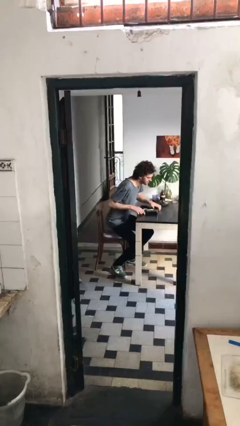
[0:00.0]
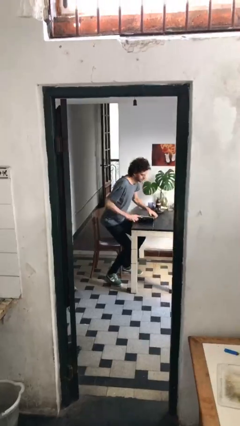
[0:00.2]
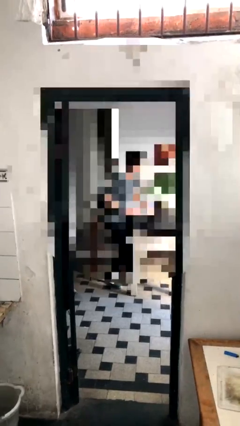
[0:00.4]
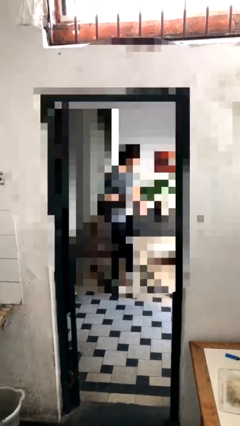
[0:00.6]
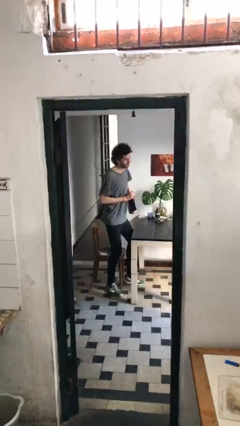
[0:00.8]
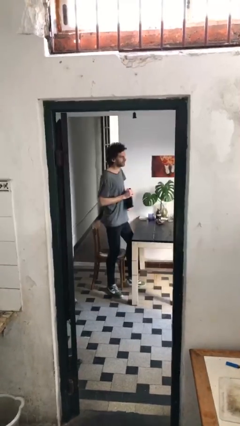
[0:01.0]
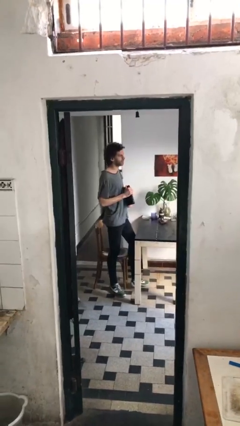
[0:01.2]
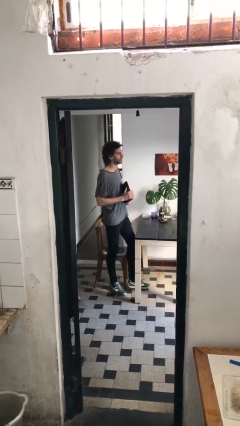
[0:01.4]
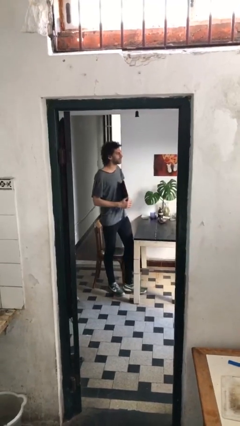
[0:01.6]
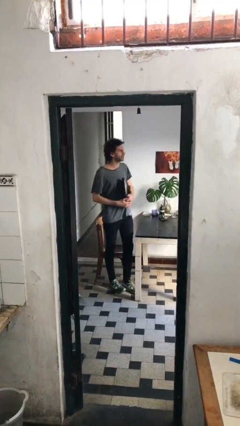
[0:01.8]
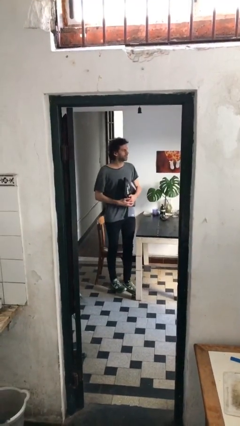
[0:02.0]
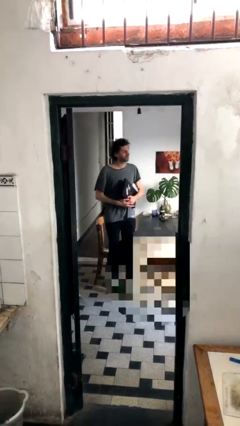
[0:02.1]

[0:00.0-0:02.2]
person stands up

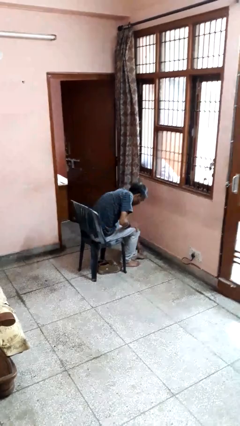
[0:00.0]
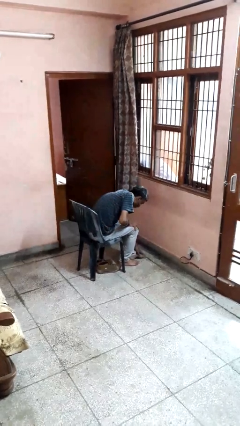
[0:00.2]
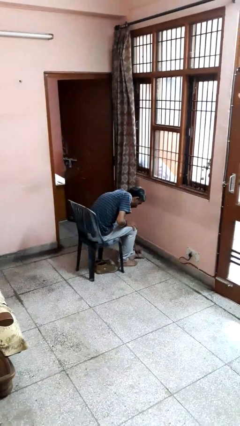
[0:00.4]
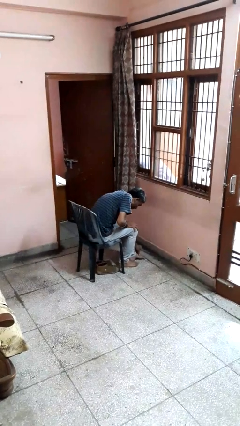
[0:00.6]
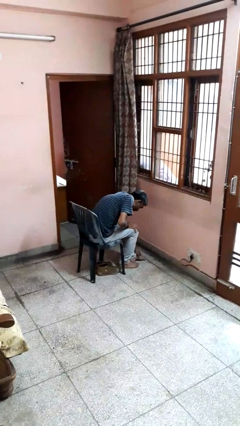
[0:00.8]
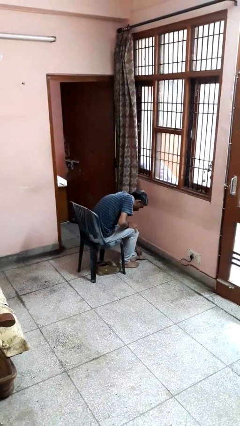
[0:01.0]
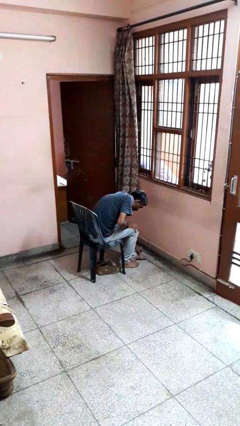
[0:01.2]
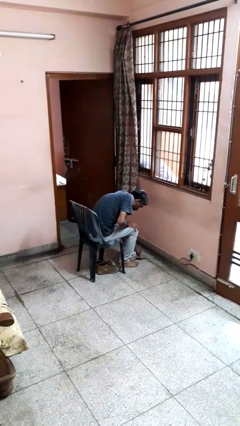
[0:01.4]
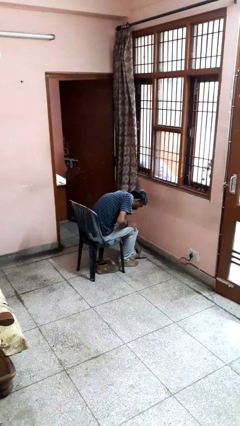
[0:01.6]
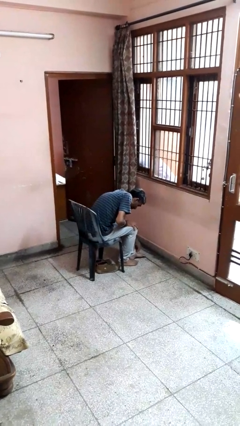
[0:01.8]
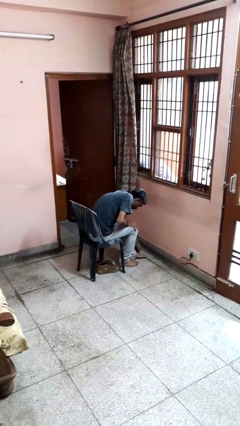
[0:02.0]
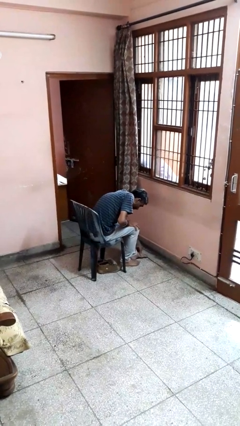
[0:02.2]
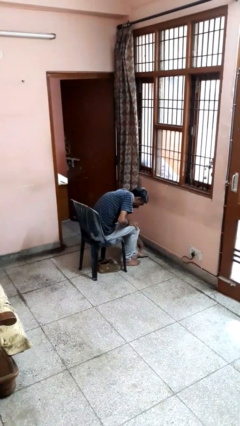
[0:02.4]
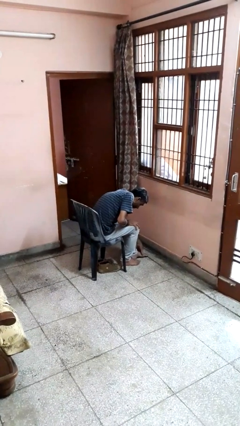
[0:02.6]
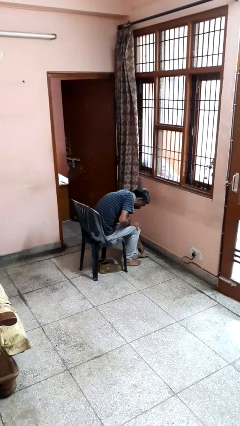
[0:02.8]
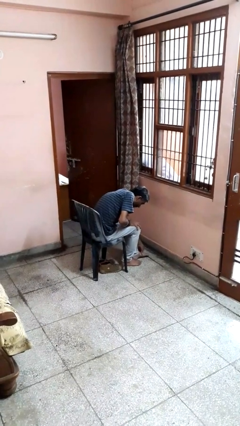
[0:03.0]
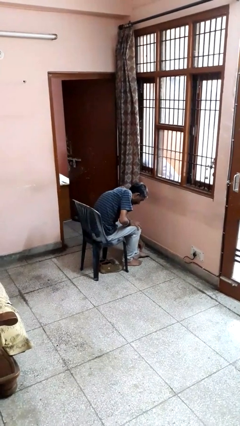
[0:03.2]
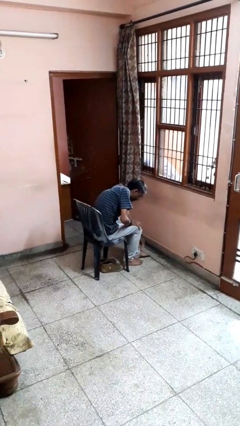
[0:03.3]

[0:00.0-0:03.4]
person rubs foot

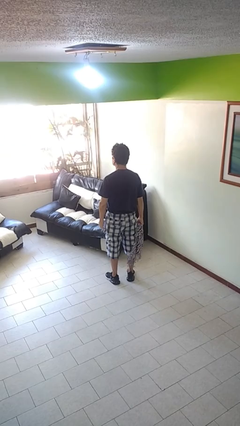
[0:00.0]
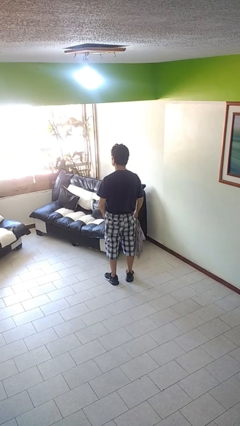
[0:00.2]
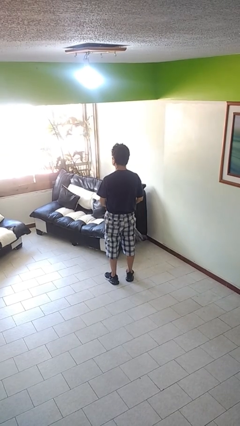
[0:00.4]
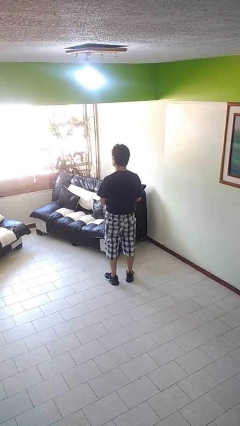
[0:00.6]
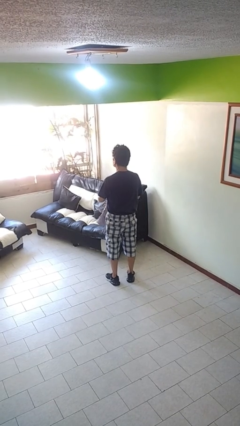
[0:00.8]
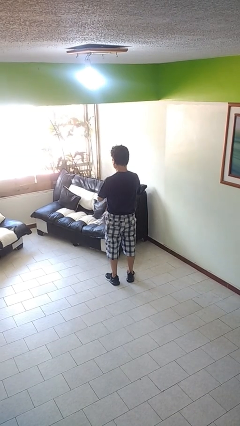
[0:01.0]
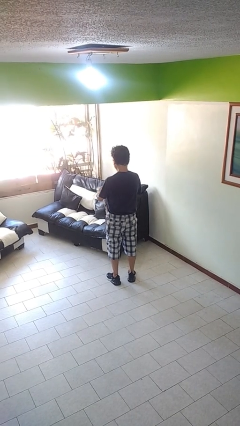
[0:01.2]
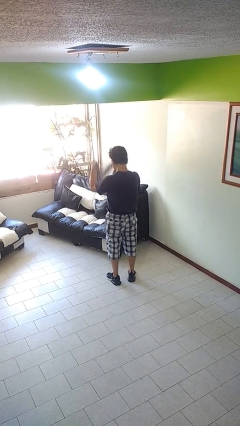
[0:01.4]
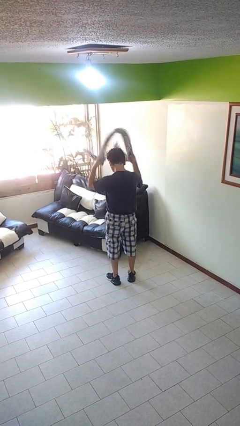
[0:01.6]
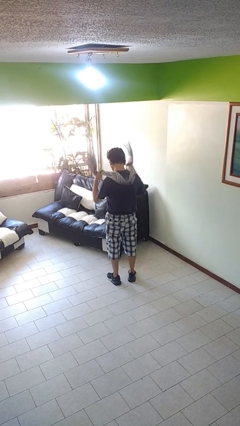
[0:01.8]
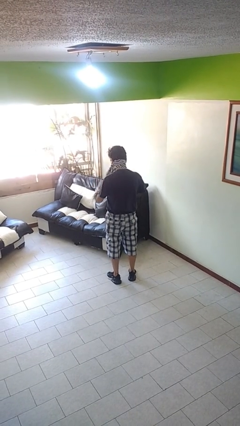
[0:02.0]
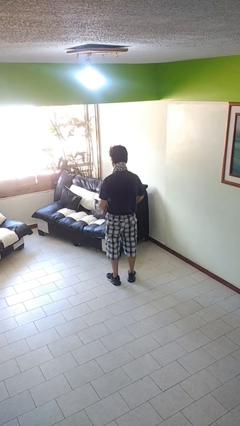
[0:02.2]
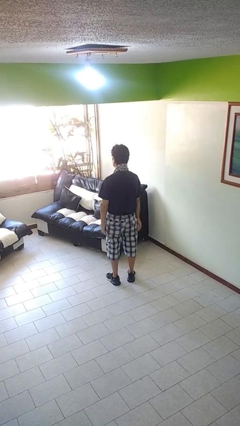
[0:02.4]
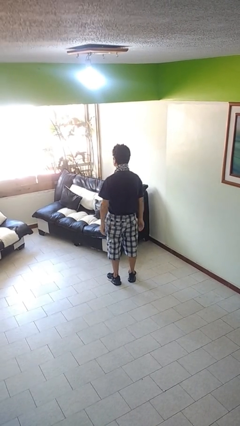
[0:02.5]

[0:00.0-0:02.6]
person puts on scarf

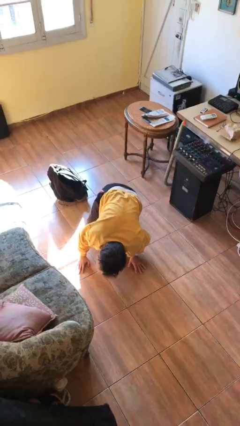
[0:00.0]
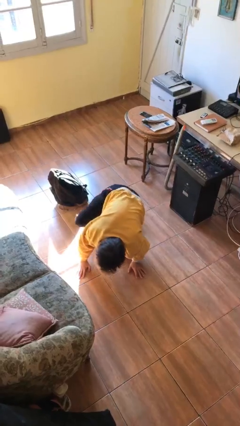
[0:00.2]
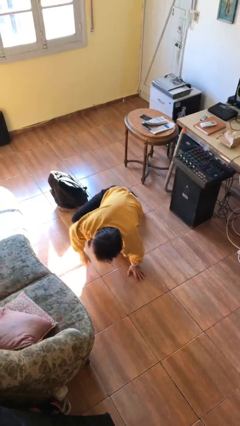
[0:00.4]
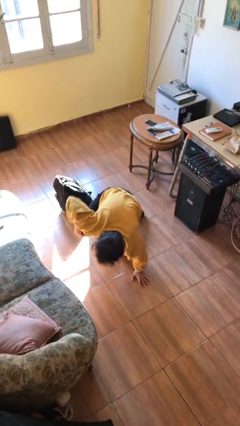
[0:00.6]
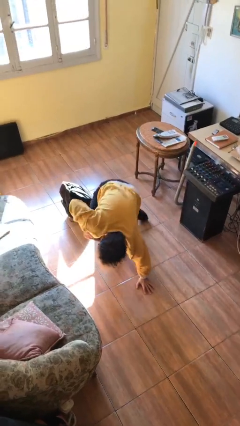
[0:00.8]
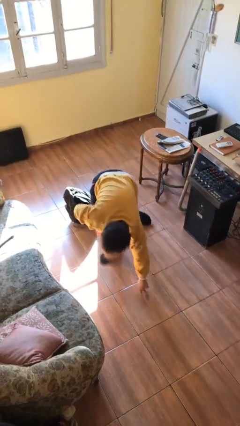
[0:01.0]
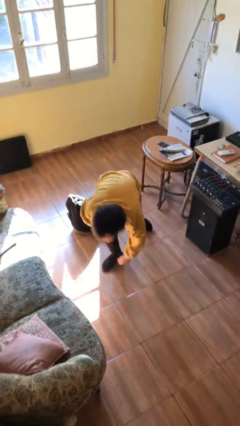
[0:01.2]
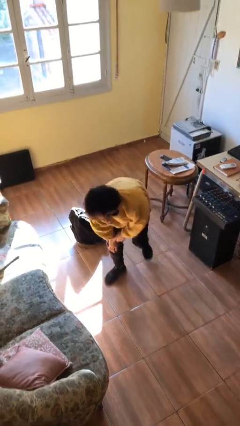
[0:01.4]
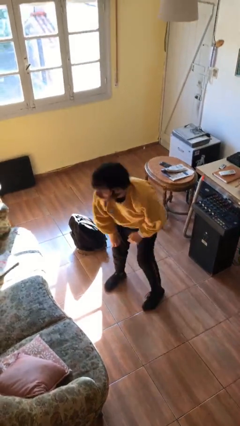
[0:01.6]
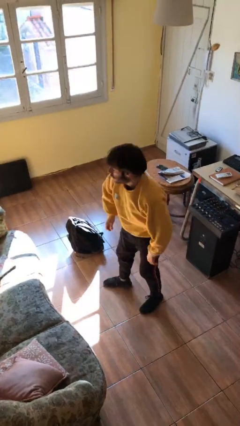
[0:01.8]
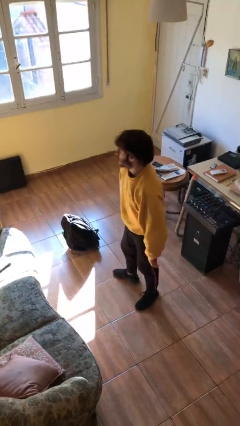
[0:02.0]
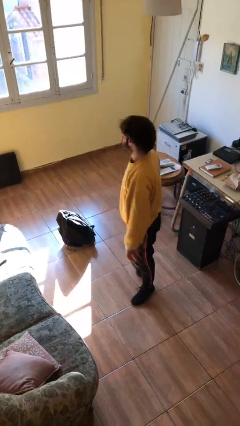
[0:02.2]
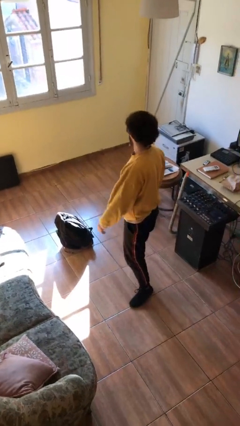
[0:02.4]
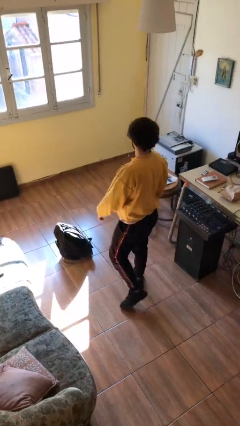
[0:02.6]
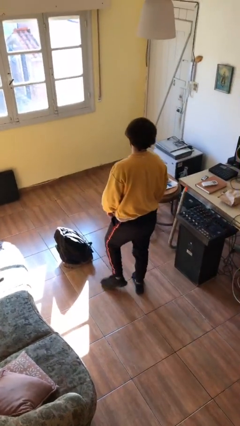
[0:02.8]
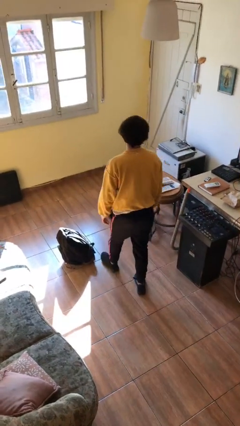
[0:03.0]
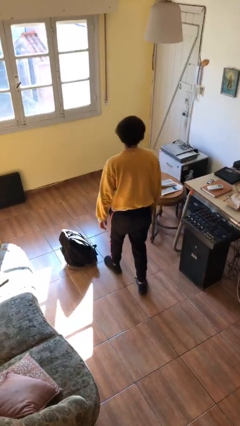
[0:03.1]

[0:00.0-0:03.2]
person stands up from floor

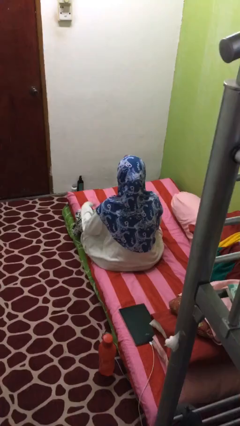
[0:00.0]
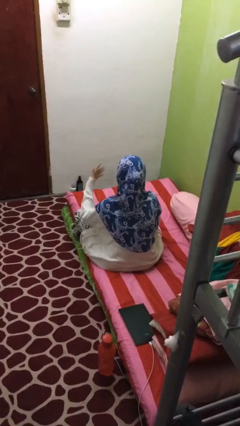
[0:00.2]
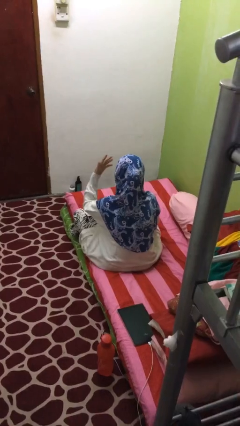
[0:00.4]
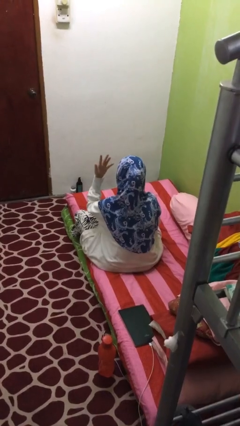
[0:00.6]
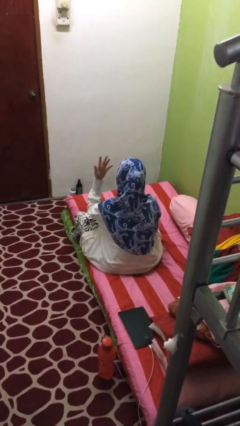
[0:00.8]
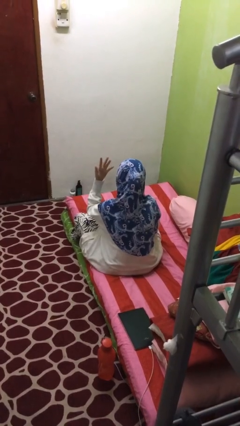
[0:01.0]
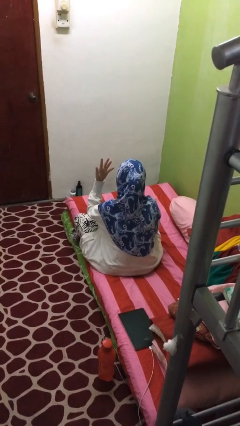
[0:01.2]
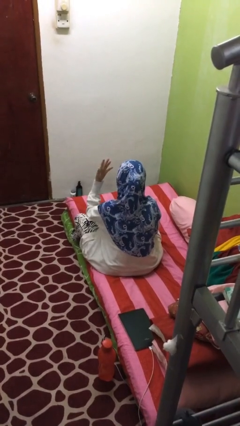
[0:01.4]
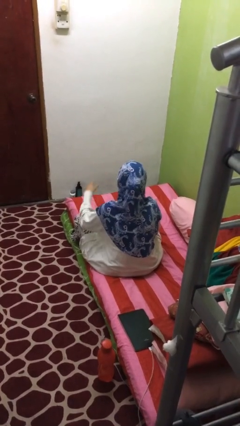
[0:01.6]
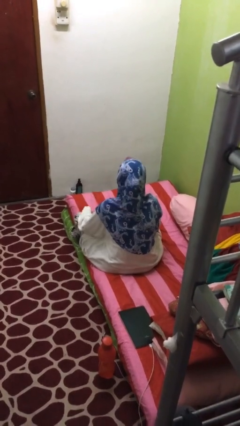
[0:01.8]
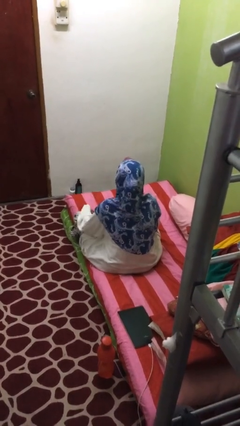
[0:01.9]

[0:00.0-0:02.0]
person gestures number five

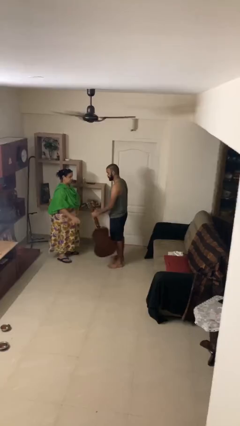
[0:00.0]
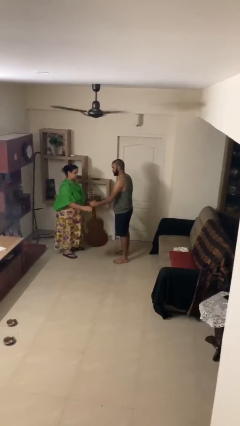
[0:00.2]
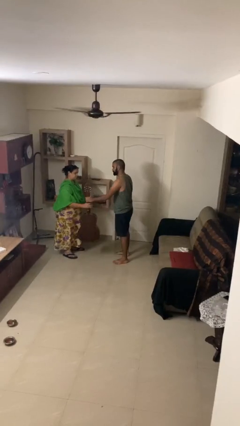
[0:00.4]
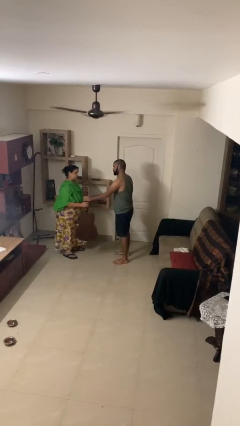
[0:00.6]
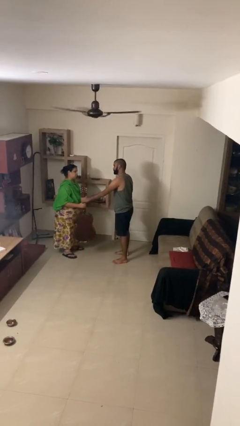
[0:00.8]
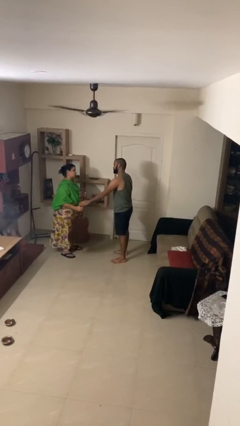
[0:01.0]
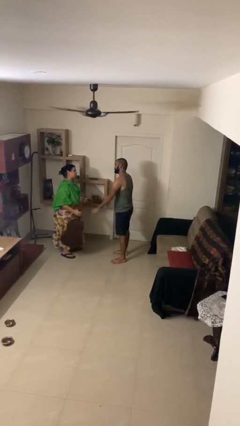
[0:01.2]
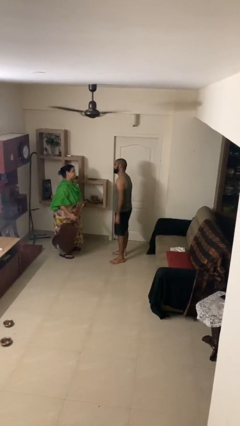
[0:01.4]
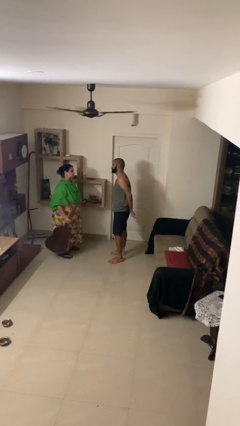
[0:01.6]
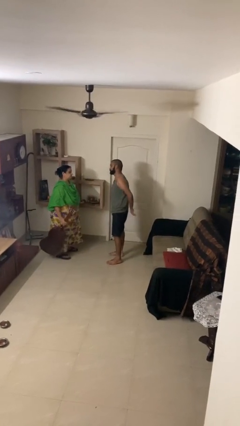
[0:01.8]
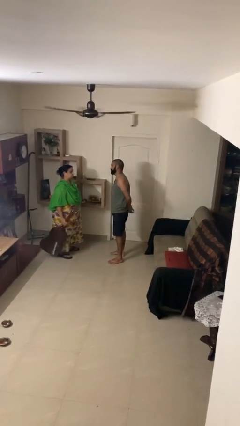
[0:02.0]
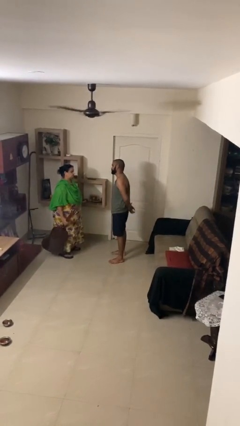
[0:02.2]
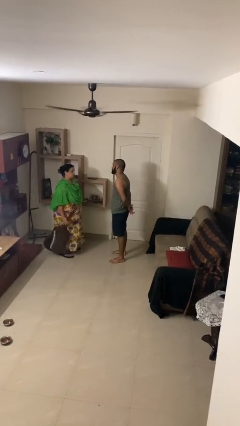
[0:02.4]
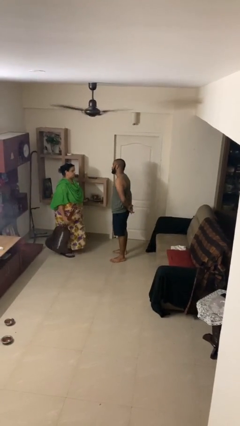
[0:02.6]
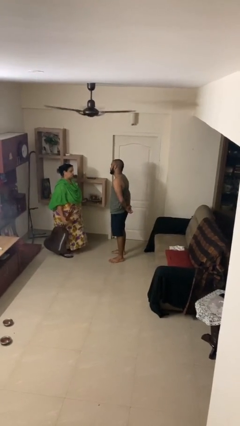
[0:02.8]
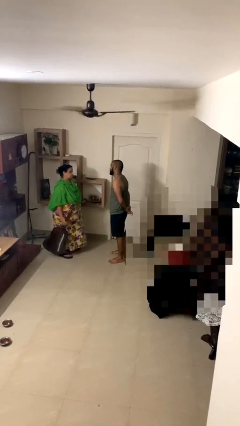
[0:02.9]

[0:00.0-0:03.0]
person transfers object to person

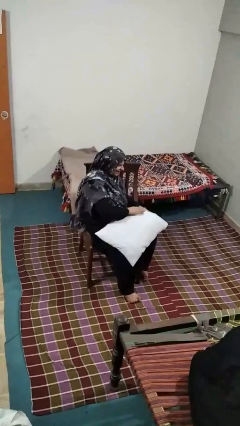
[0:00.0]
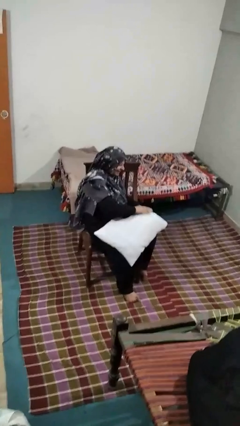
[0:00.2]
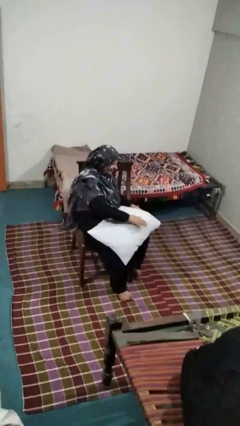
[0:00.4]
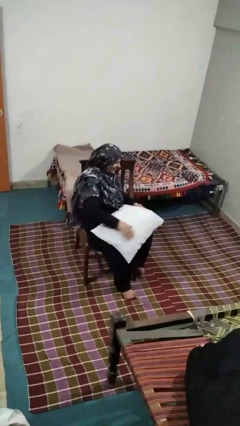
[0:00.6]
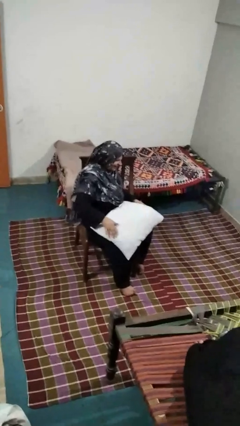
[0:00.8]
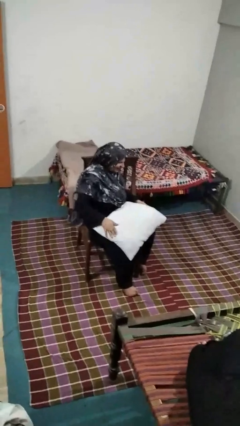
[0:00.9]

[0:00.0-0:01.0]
person waves hand over object
